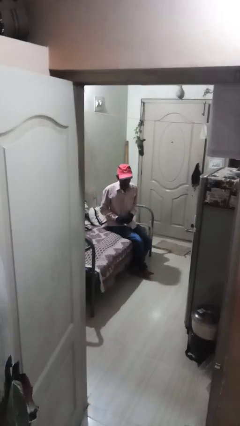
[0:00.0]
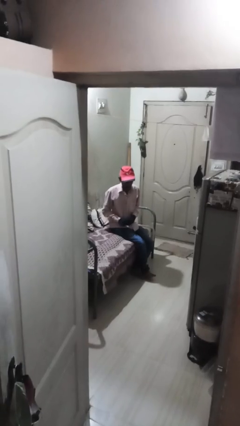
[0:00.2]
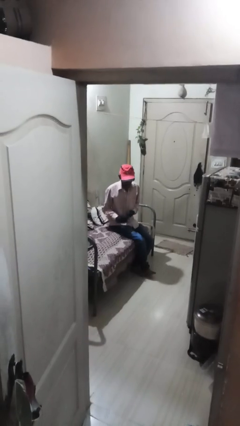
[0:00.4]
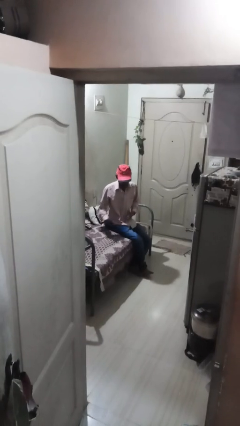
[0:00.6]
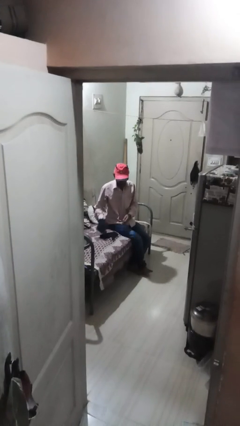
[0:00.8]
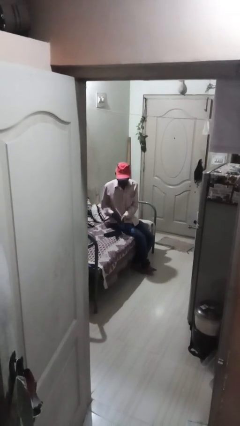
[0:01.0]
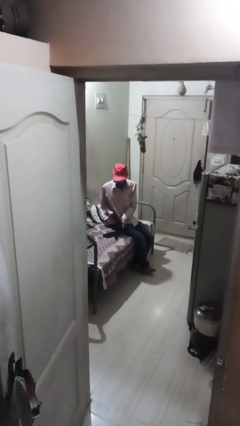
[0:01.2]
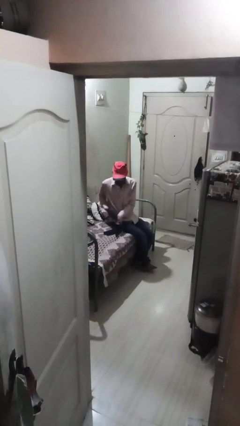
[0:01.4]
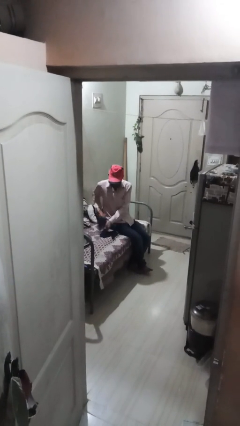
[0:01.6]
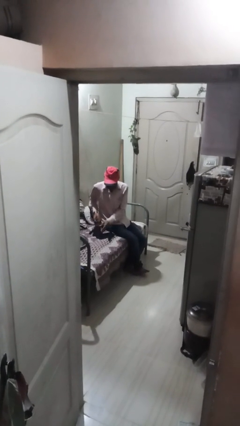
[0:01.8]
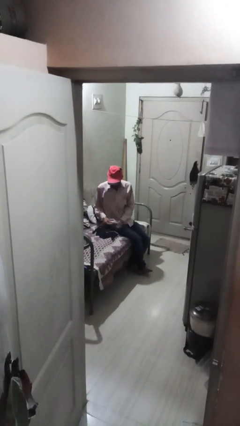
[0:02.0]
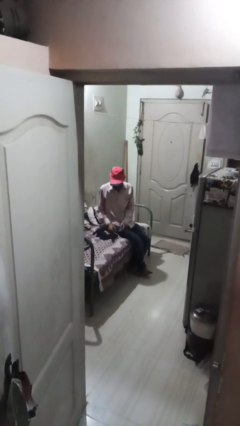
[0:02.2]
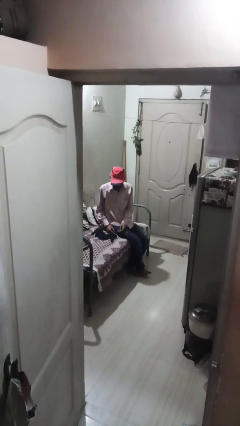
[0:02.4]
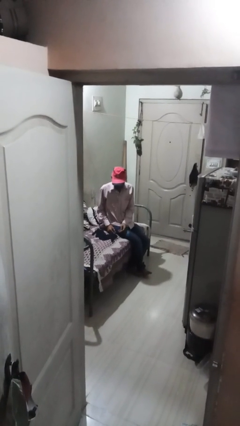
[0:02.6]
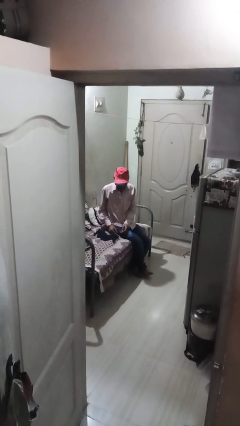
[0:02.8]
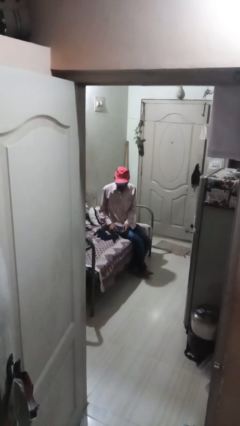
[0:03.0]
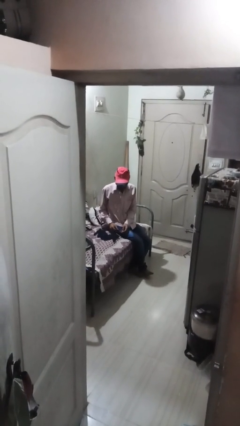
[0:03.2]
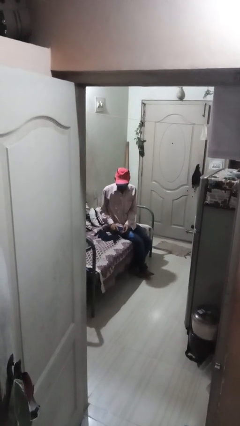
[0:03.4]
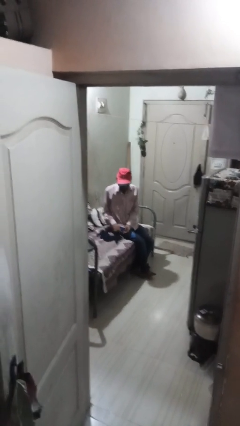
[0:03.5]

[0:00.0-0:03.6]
person takes off gloves

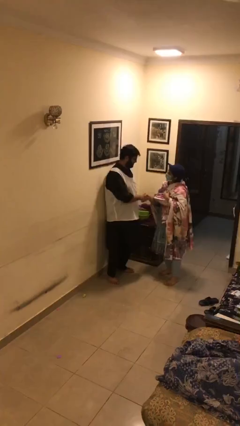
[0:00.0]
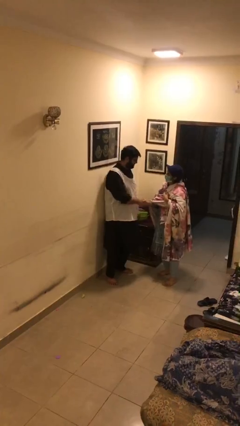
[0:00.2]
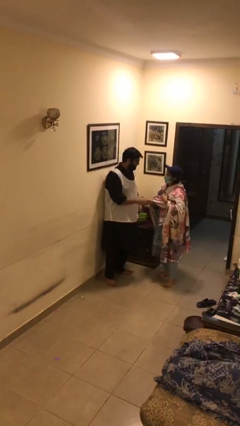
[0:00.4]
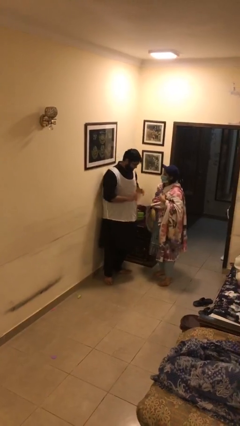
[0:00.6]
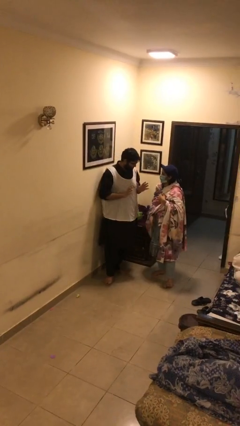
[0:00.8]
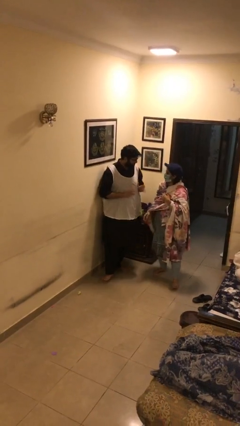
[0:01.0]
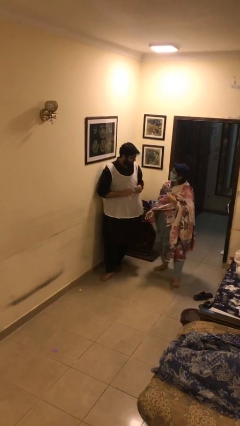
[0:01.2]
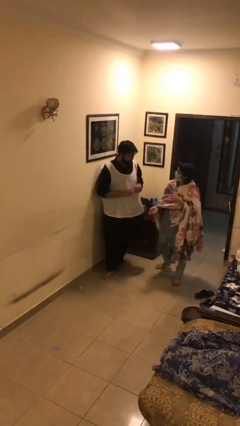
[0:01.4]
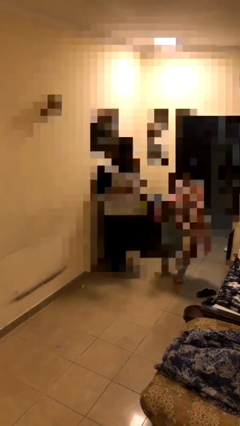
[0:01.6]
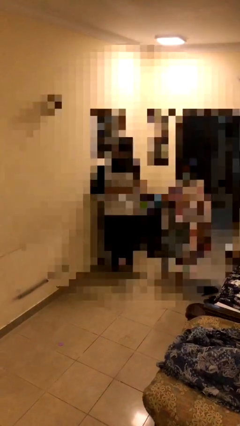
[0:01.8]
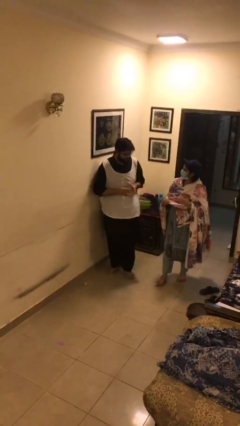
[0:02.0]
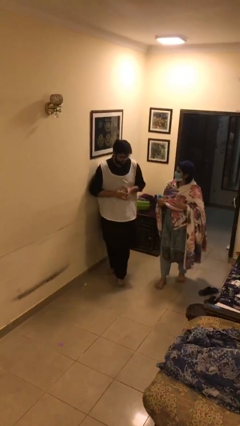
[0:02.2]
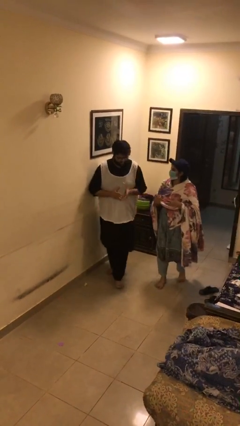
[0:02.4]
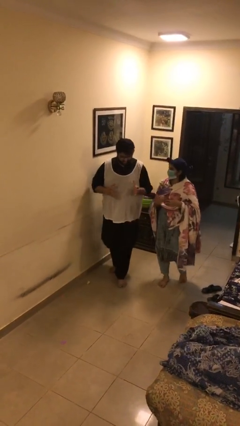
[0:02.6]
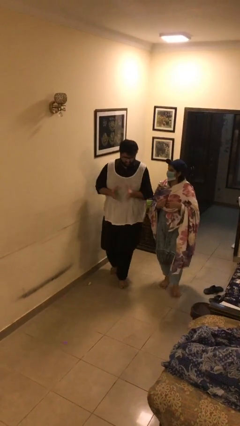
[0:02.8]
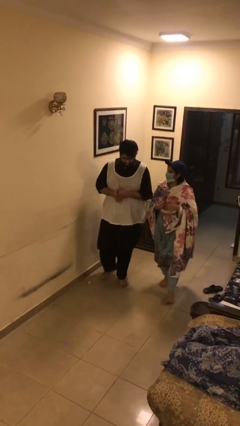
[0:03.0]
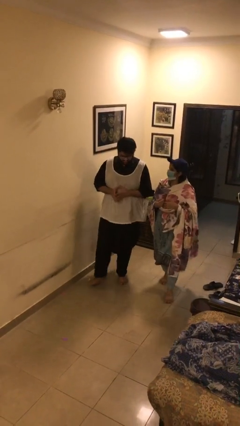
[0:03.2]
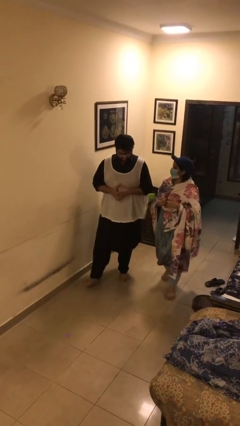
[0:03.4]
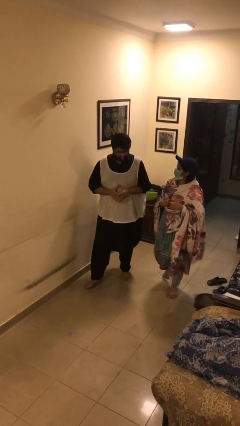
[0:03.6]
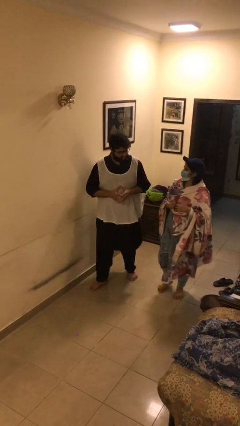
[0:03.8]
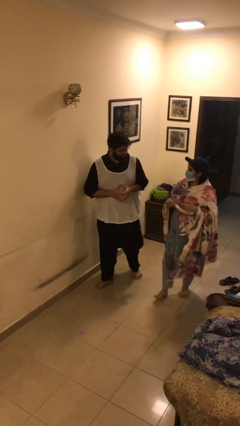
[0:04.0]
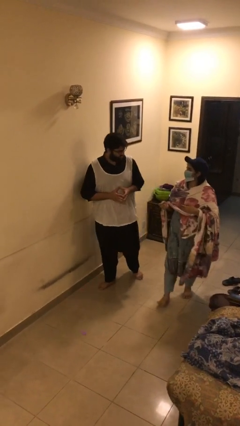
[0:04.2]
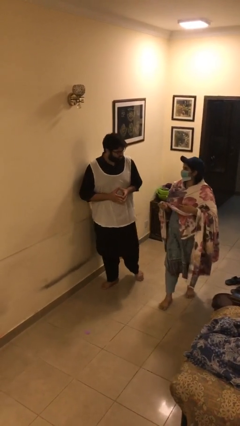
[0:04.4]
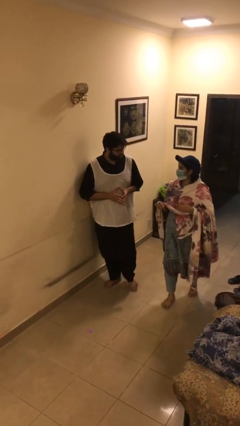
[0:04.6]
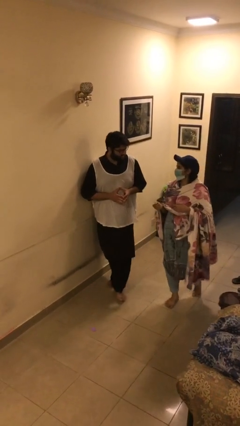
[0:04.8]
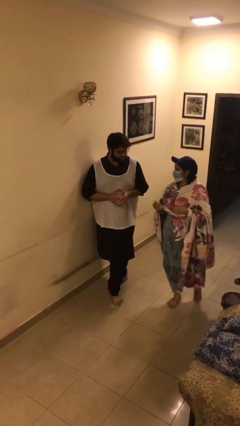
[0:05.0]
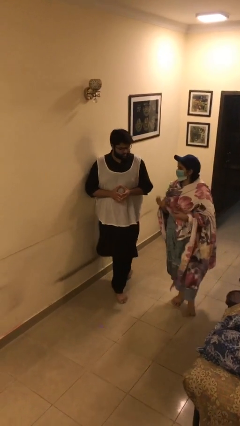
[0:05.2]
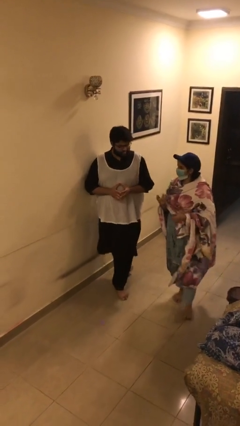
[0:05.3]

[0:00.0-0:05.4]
person talks to person

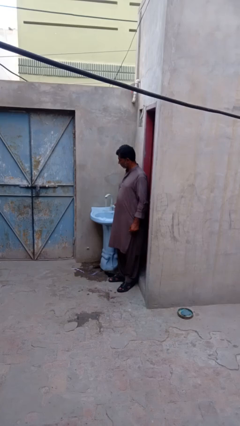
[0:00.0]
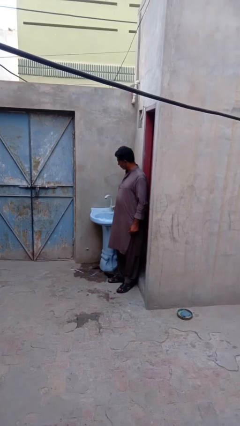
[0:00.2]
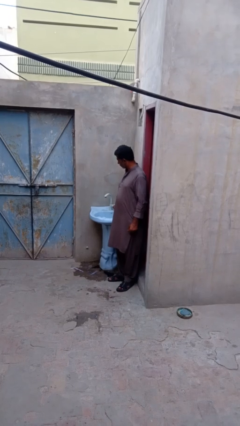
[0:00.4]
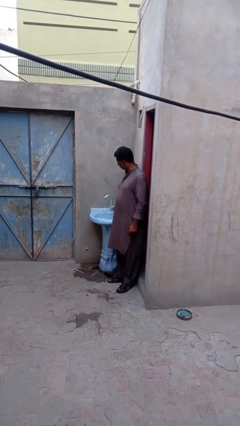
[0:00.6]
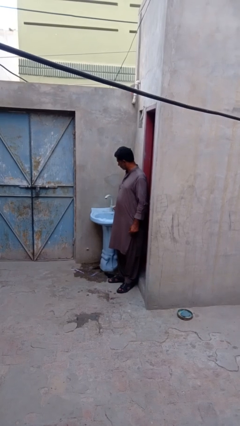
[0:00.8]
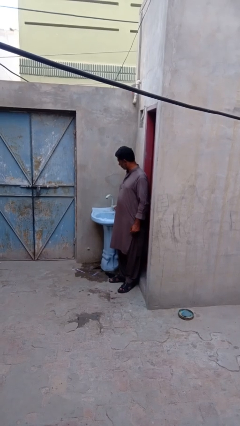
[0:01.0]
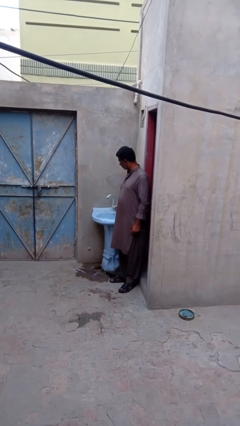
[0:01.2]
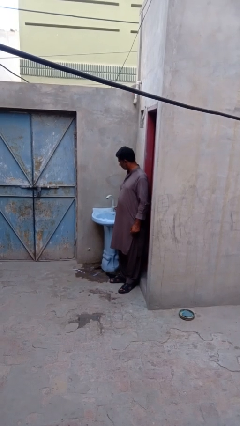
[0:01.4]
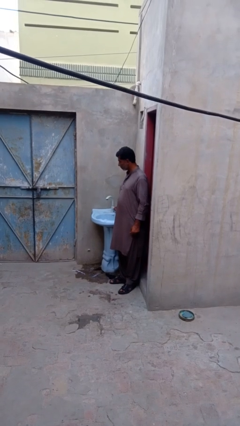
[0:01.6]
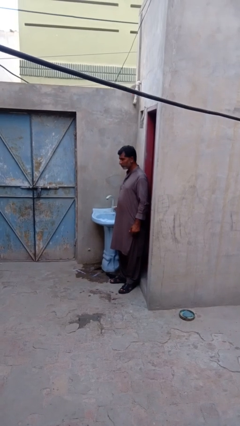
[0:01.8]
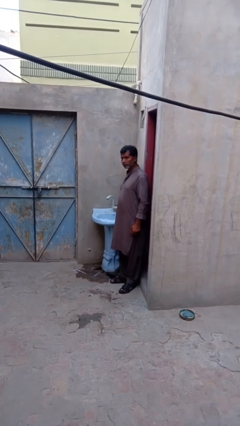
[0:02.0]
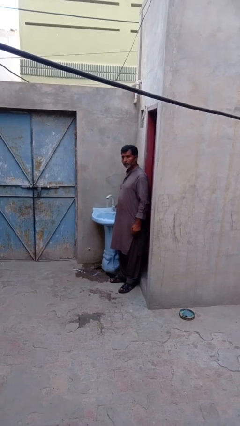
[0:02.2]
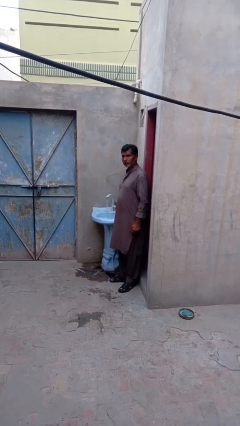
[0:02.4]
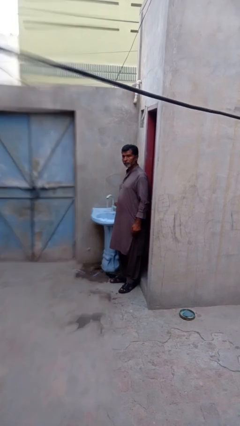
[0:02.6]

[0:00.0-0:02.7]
person turns off faucet

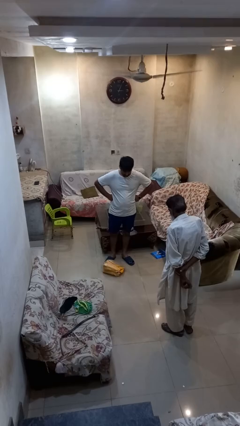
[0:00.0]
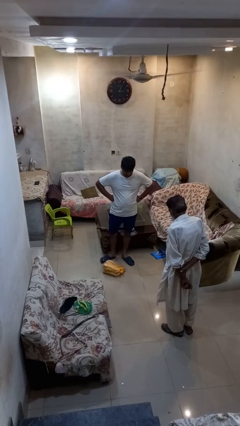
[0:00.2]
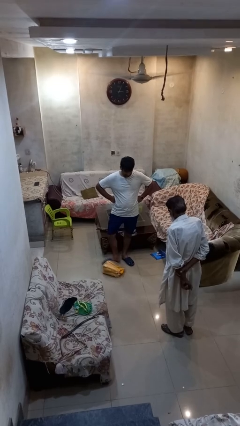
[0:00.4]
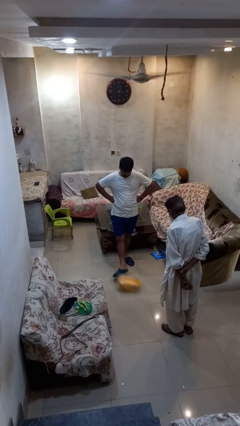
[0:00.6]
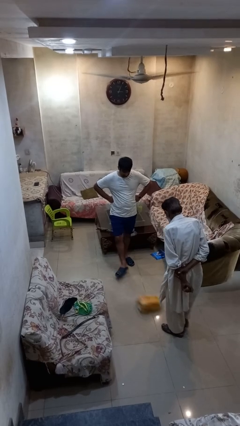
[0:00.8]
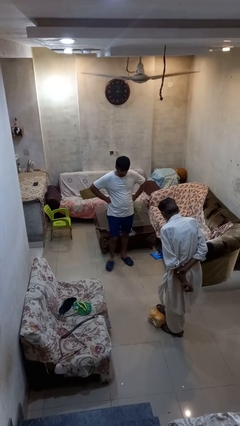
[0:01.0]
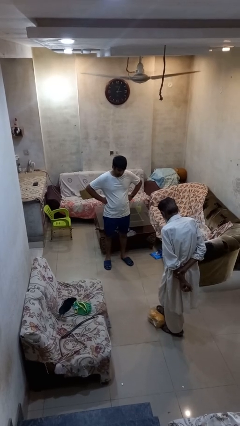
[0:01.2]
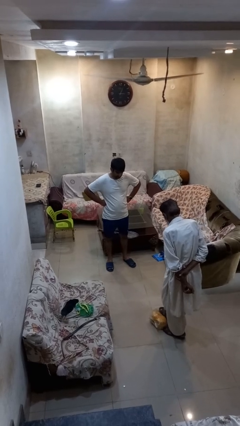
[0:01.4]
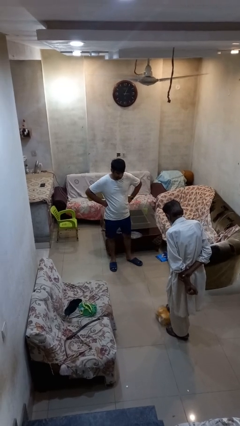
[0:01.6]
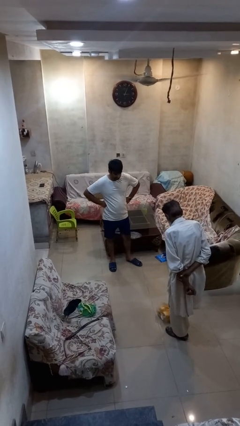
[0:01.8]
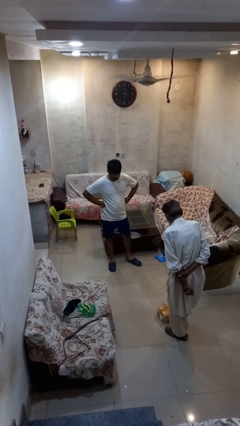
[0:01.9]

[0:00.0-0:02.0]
person kicks object to person

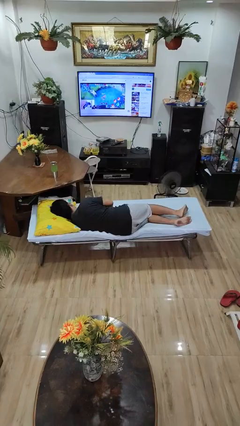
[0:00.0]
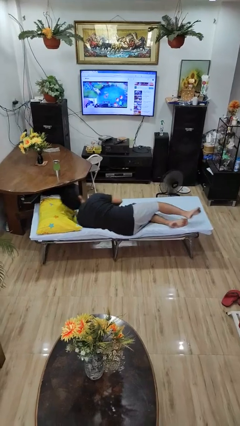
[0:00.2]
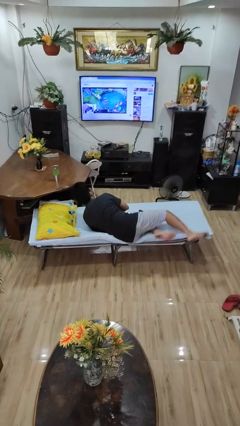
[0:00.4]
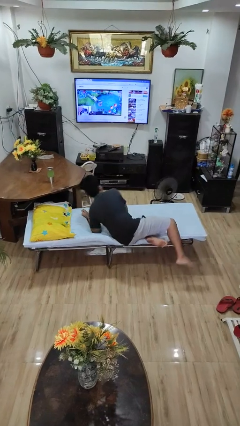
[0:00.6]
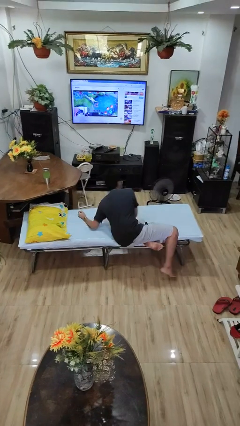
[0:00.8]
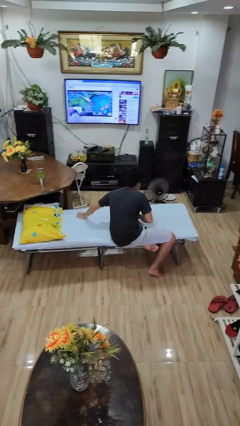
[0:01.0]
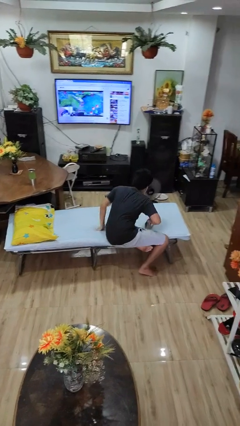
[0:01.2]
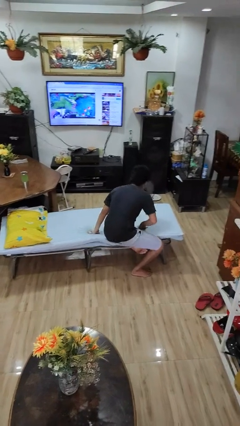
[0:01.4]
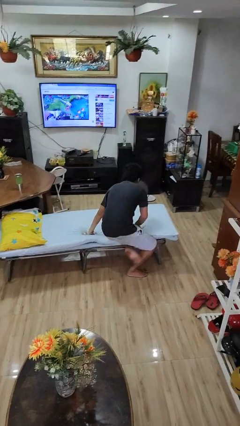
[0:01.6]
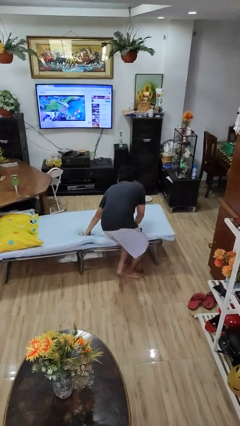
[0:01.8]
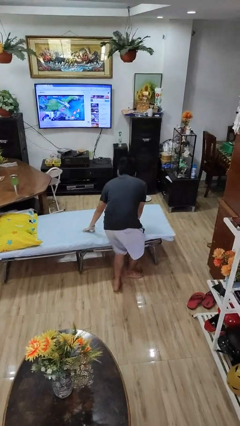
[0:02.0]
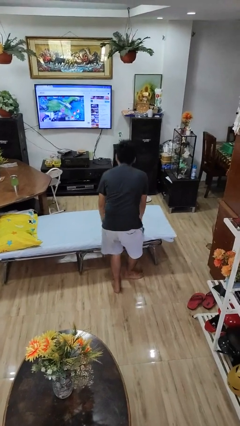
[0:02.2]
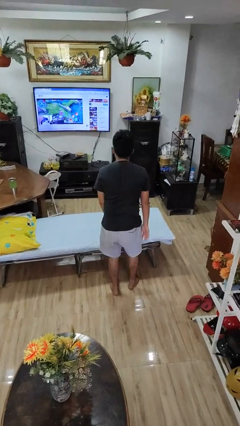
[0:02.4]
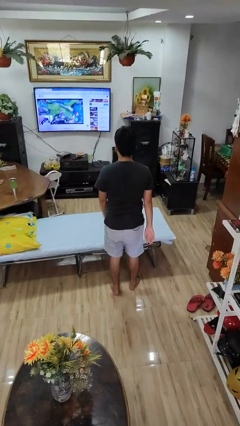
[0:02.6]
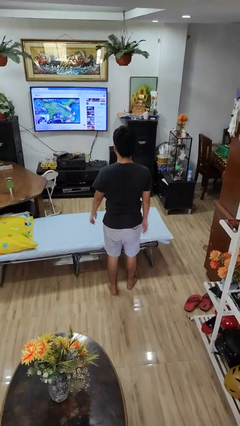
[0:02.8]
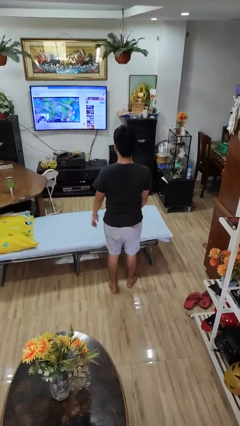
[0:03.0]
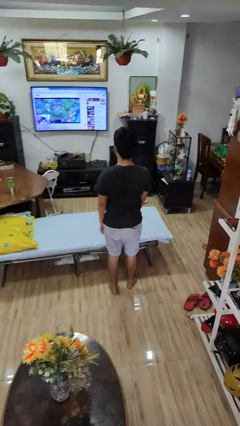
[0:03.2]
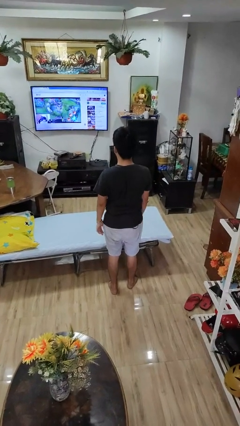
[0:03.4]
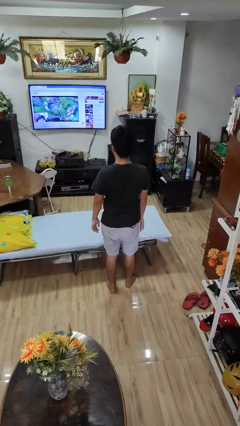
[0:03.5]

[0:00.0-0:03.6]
person stands up

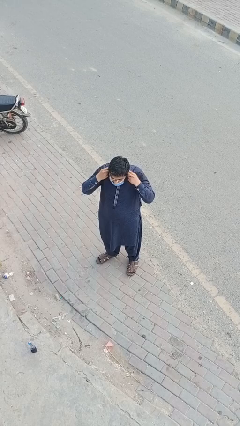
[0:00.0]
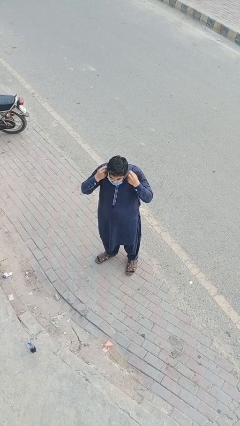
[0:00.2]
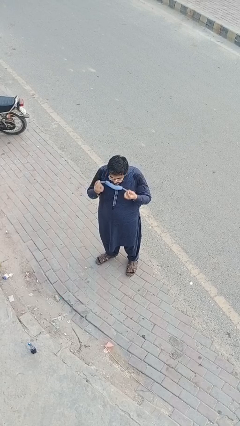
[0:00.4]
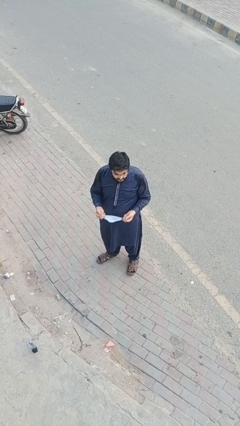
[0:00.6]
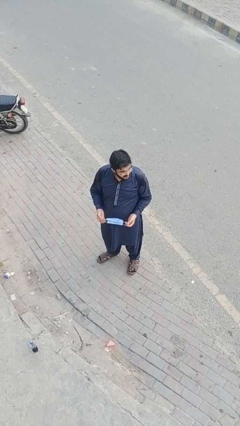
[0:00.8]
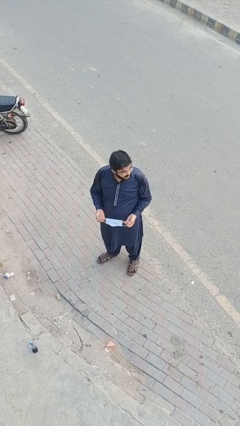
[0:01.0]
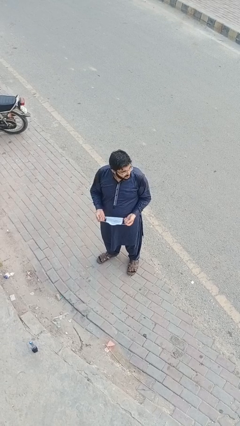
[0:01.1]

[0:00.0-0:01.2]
person takes off facemask
